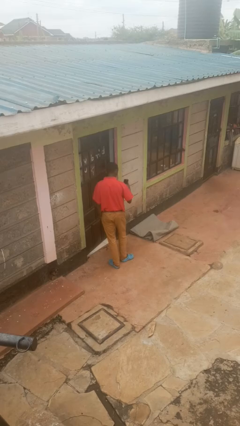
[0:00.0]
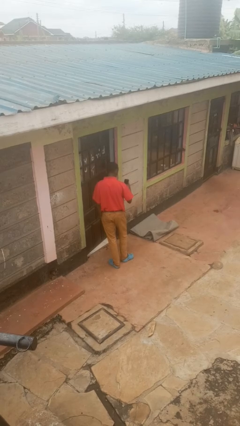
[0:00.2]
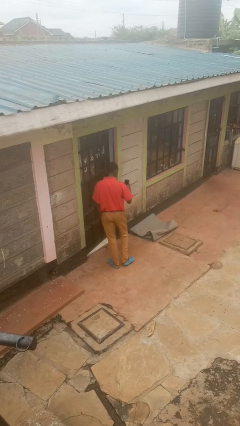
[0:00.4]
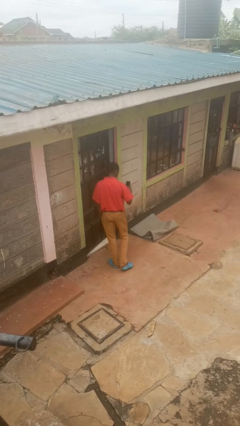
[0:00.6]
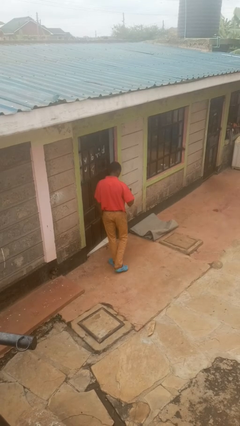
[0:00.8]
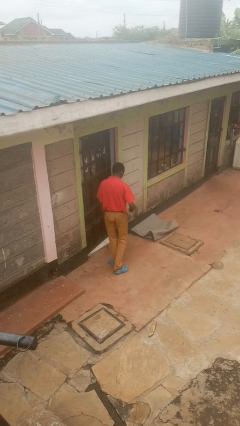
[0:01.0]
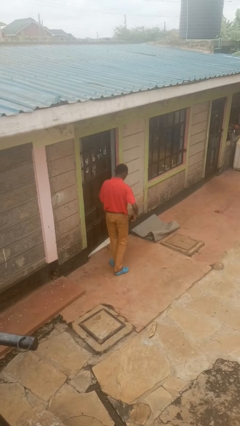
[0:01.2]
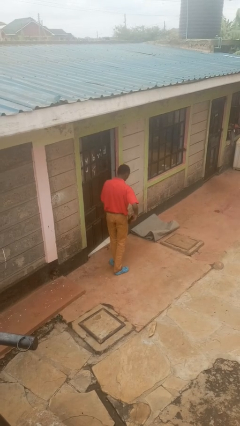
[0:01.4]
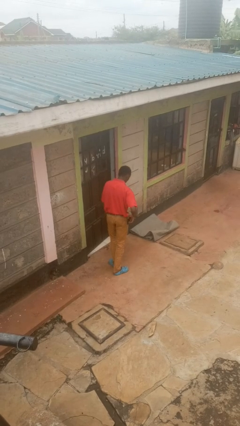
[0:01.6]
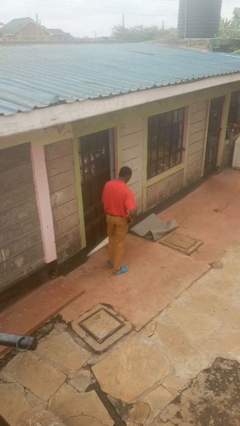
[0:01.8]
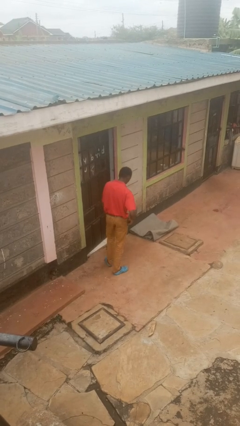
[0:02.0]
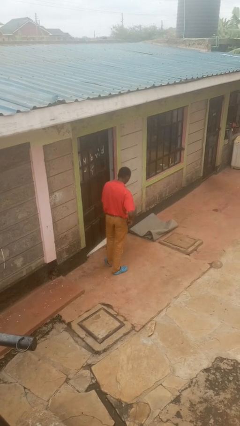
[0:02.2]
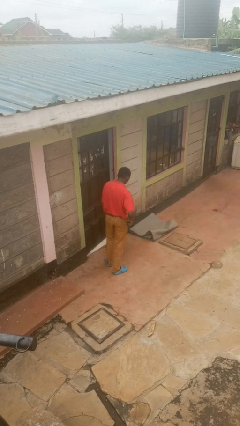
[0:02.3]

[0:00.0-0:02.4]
person puts phone into pocket

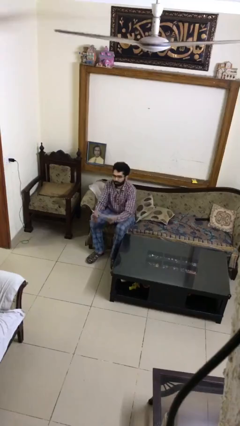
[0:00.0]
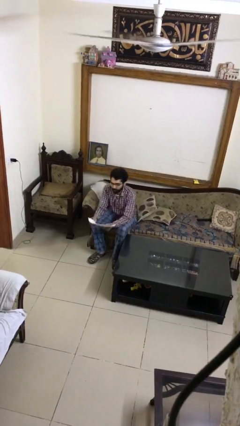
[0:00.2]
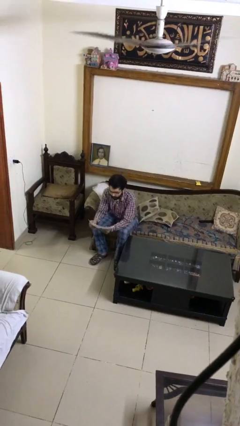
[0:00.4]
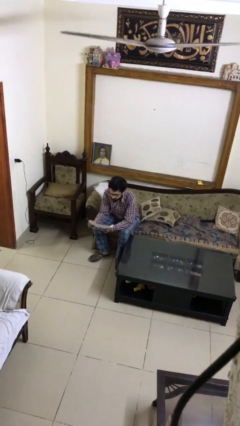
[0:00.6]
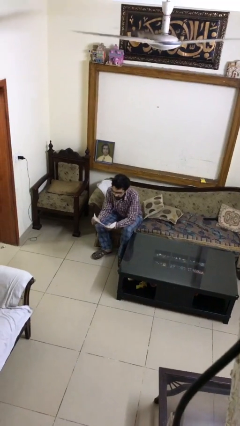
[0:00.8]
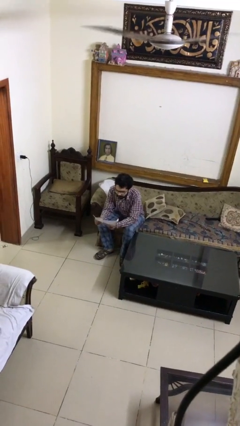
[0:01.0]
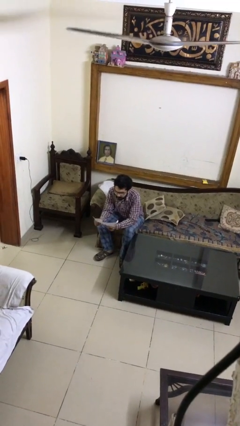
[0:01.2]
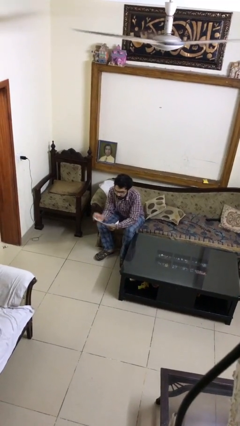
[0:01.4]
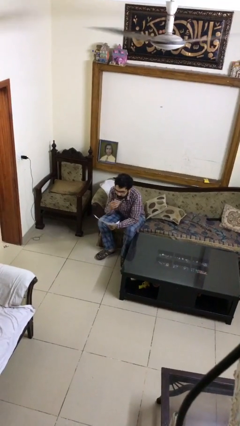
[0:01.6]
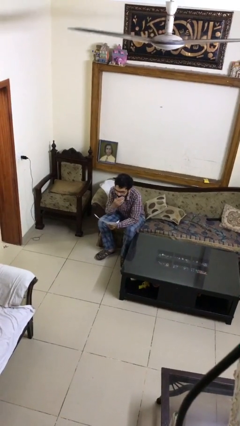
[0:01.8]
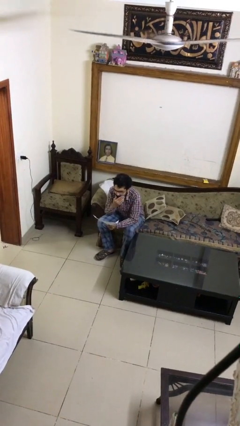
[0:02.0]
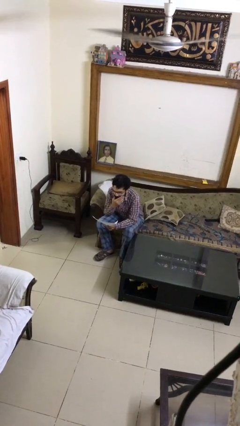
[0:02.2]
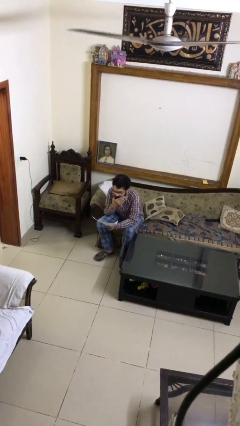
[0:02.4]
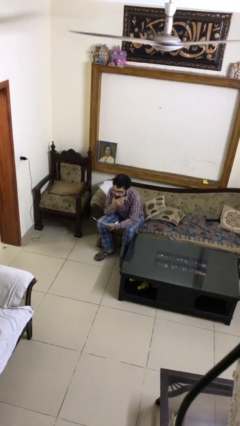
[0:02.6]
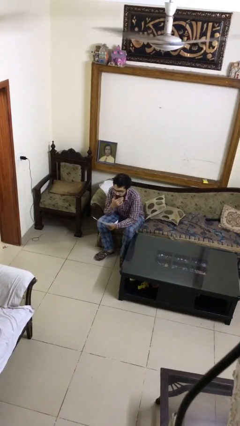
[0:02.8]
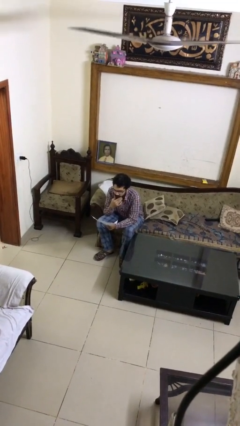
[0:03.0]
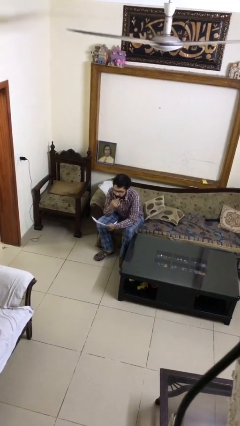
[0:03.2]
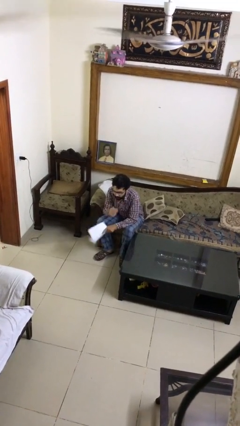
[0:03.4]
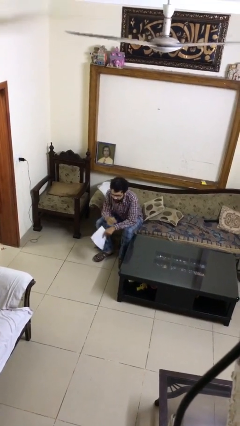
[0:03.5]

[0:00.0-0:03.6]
person reads document

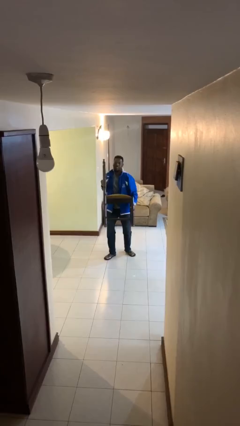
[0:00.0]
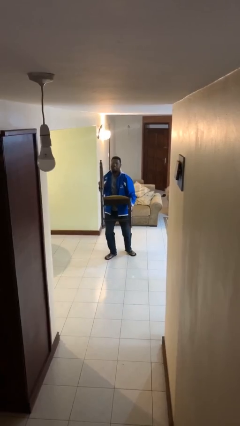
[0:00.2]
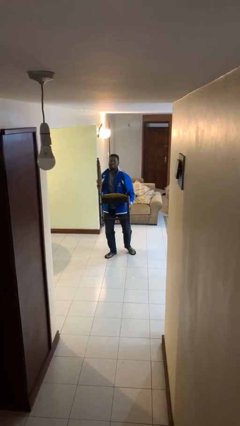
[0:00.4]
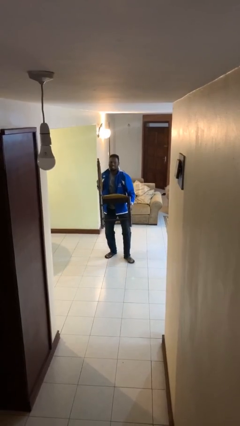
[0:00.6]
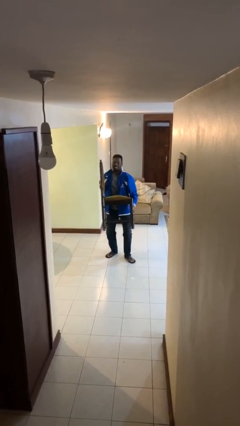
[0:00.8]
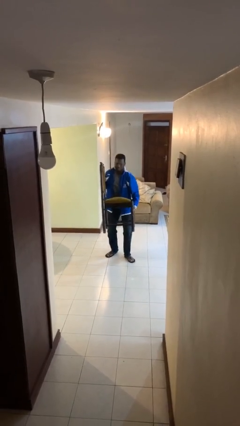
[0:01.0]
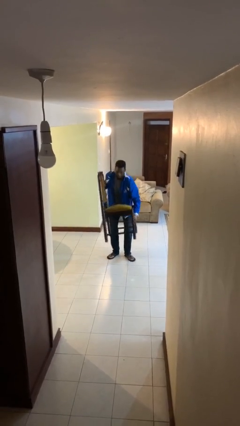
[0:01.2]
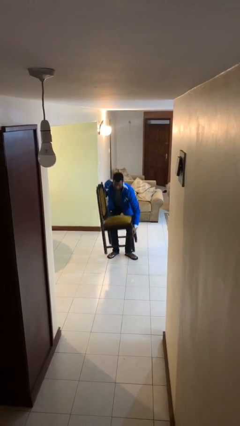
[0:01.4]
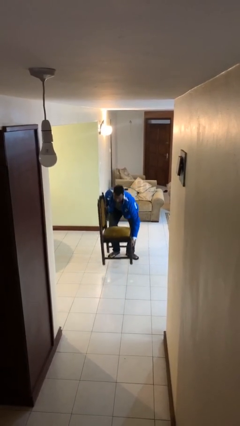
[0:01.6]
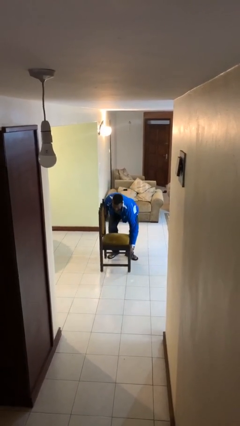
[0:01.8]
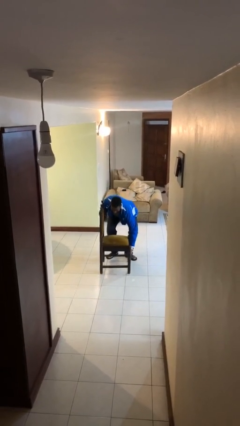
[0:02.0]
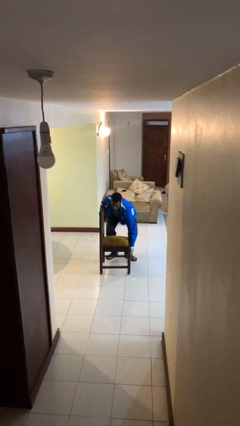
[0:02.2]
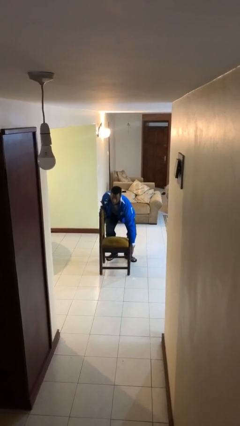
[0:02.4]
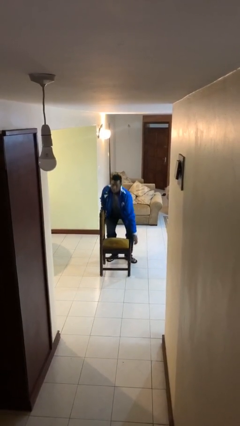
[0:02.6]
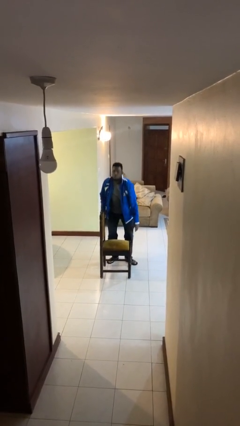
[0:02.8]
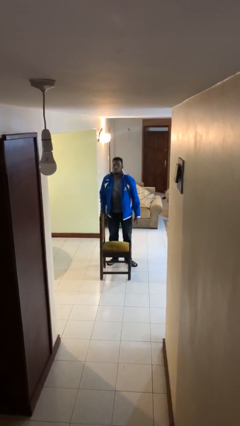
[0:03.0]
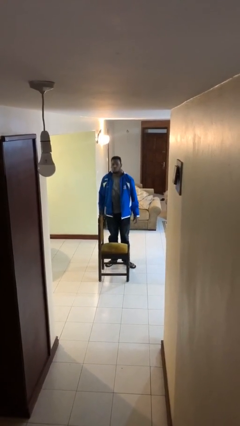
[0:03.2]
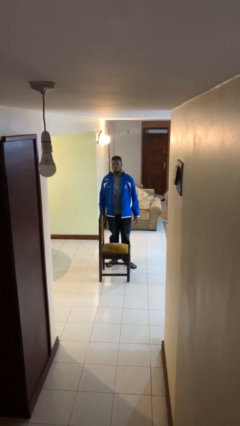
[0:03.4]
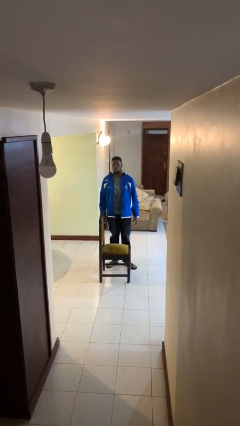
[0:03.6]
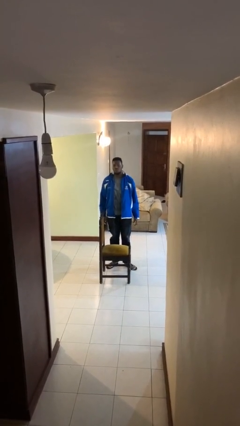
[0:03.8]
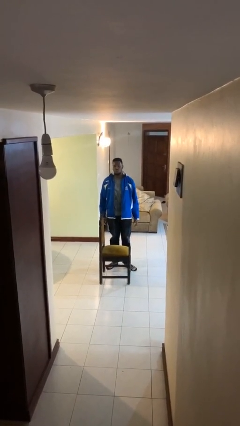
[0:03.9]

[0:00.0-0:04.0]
person puts down object on floor

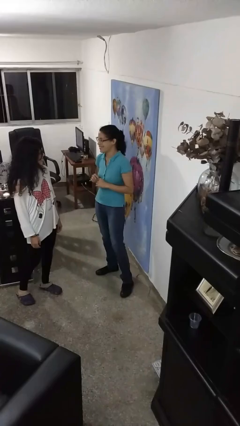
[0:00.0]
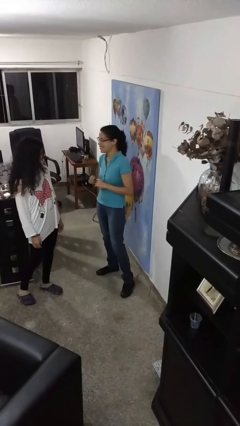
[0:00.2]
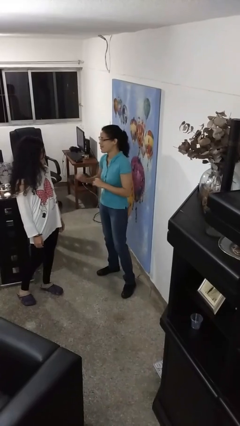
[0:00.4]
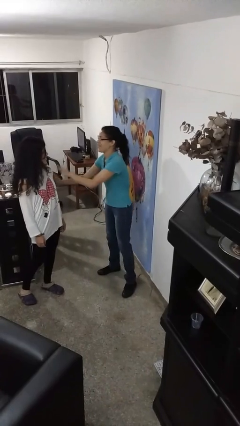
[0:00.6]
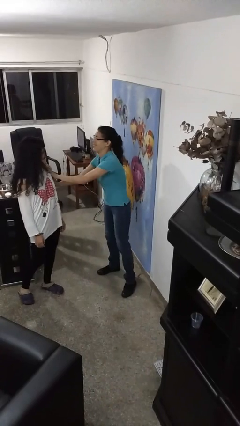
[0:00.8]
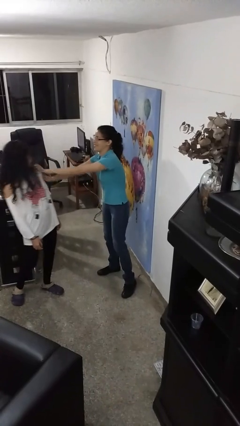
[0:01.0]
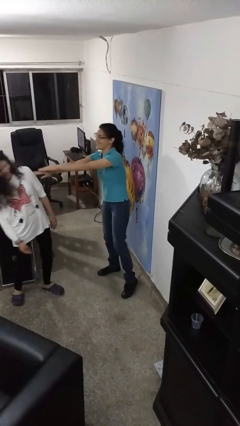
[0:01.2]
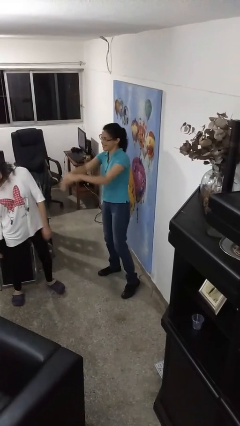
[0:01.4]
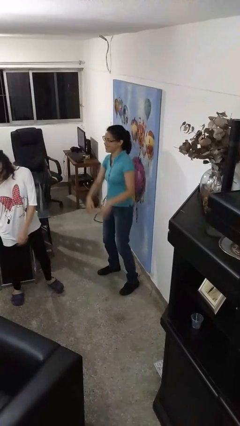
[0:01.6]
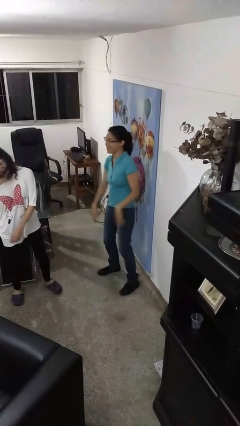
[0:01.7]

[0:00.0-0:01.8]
person shoves person

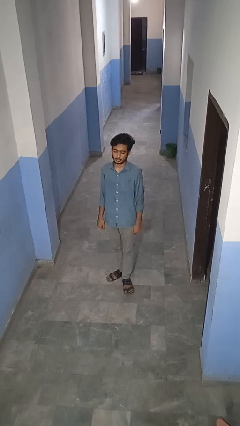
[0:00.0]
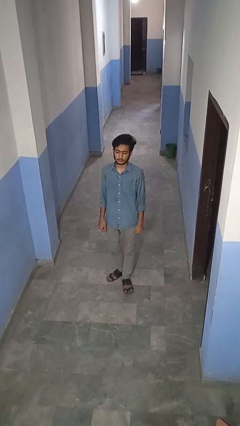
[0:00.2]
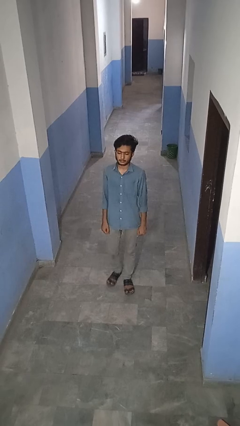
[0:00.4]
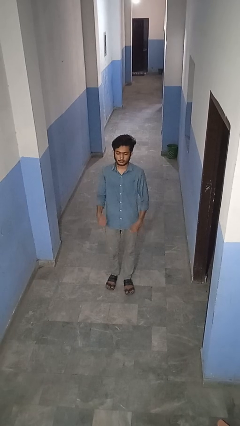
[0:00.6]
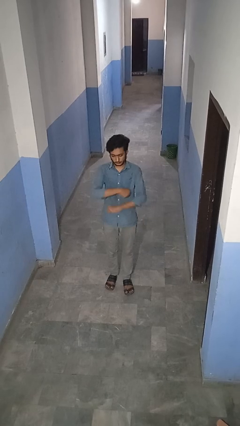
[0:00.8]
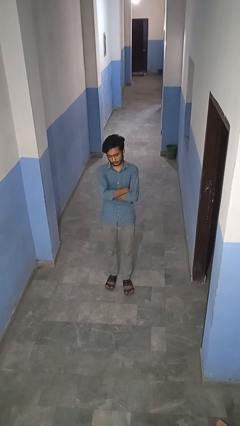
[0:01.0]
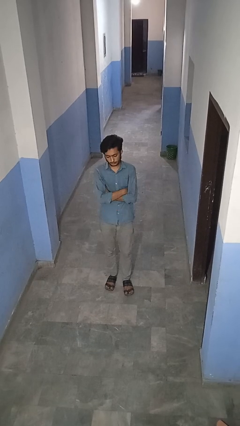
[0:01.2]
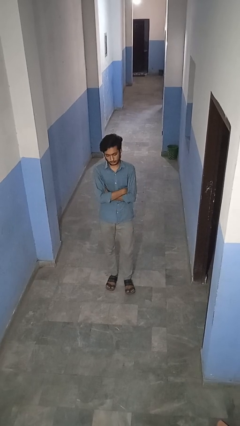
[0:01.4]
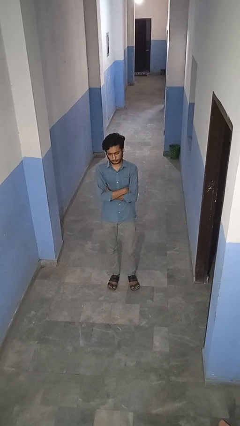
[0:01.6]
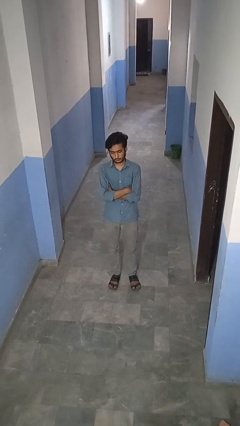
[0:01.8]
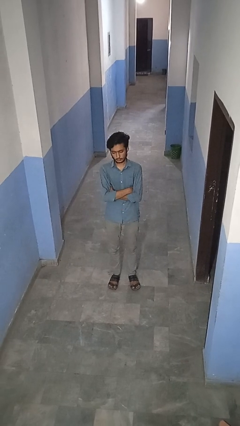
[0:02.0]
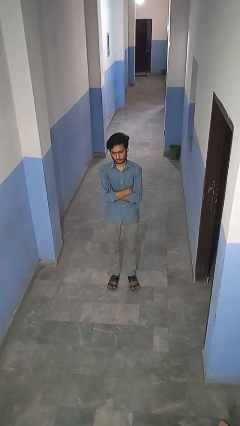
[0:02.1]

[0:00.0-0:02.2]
person crosses arms

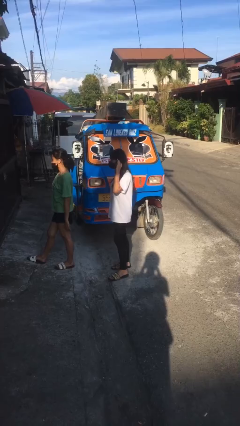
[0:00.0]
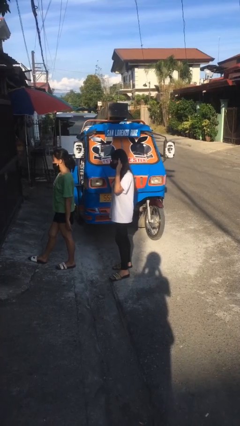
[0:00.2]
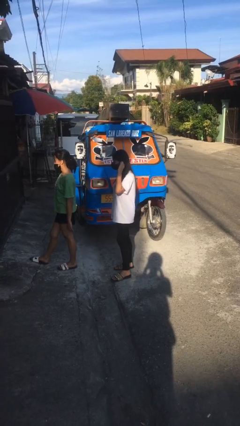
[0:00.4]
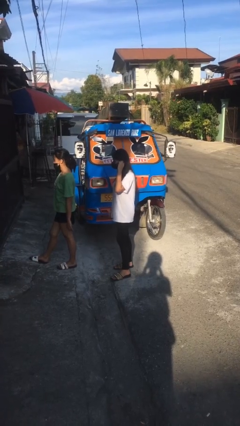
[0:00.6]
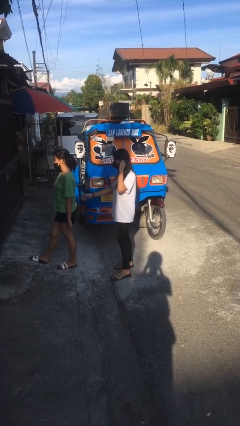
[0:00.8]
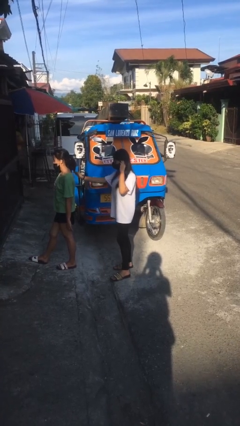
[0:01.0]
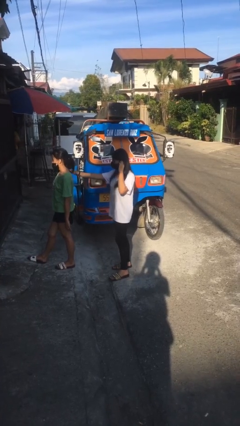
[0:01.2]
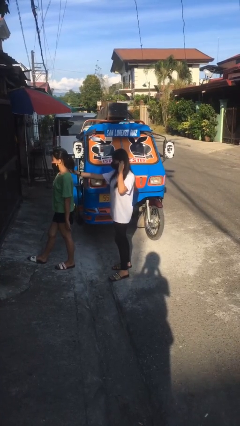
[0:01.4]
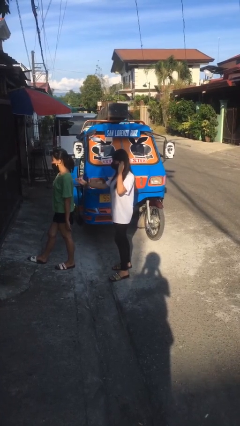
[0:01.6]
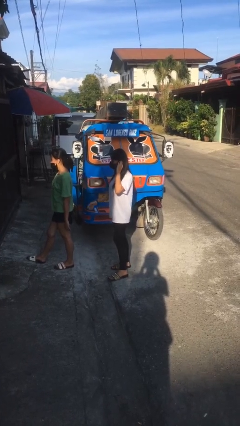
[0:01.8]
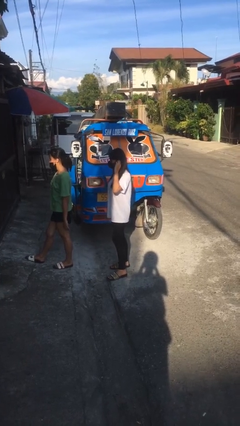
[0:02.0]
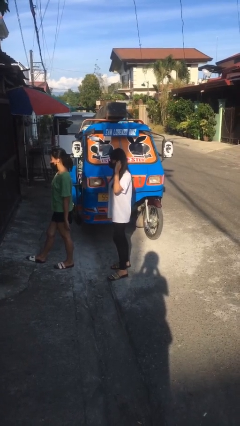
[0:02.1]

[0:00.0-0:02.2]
person touches back of person

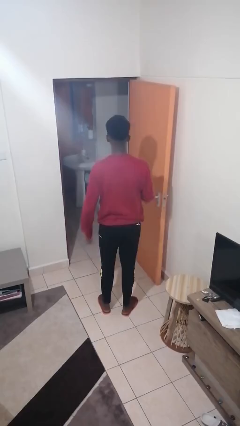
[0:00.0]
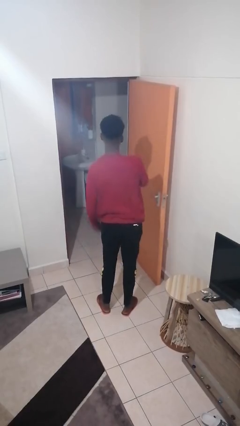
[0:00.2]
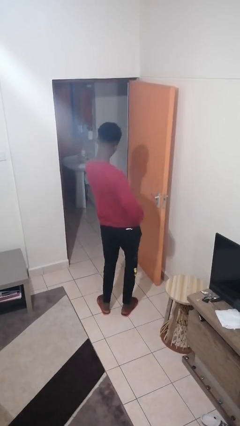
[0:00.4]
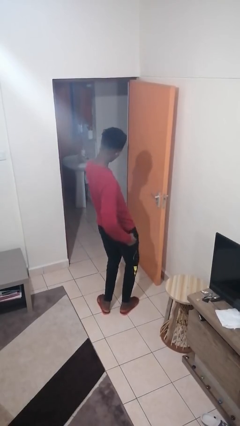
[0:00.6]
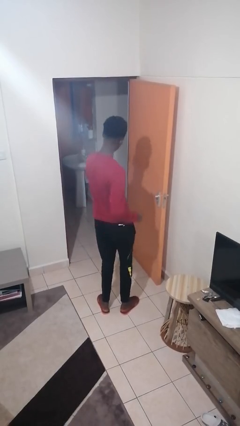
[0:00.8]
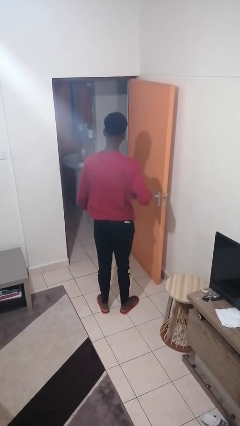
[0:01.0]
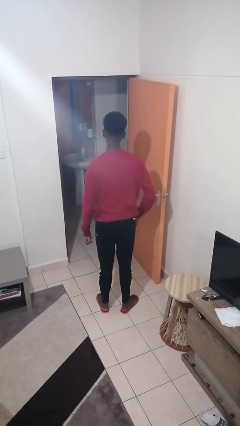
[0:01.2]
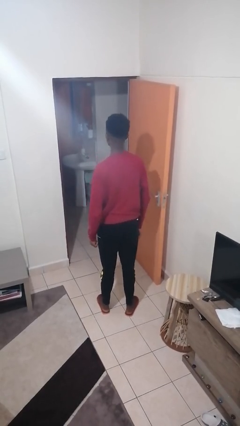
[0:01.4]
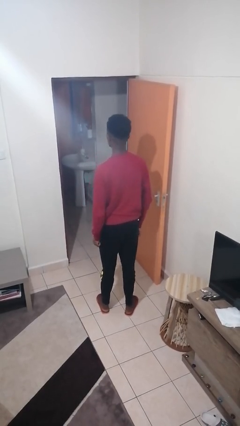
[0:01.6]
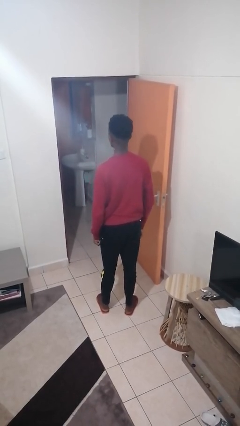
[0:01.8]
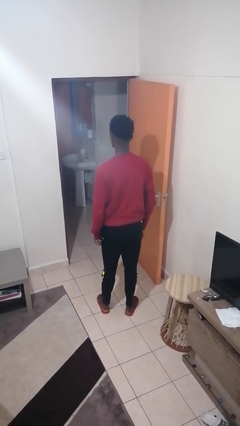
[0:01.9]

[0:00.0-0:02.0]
person punches
